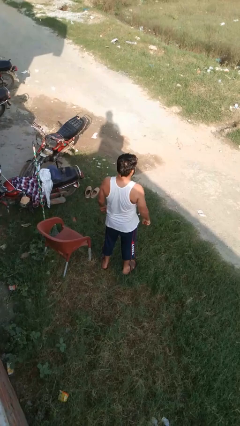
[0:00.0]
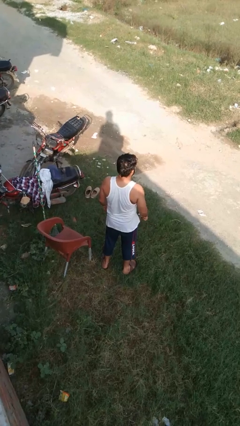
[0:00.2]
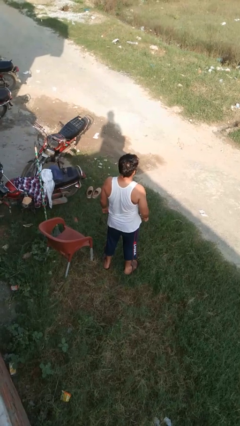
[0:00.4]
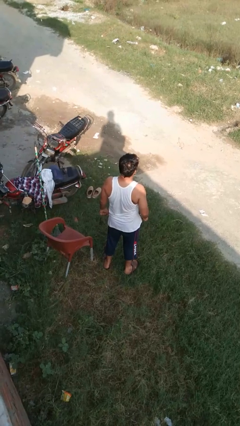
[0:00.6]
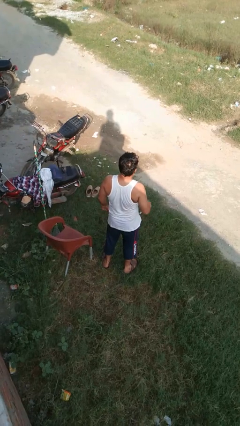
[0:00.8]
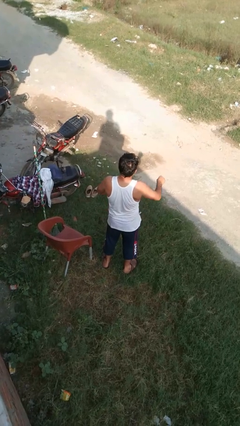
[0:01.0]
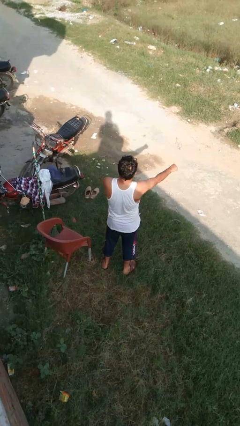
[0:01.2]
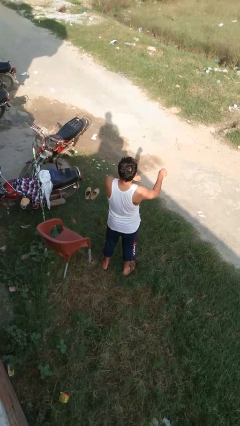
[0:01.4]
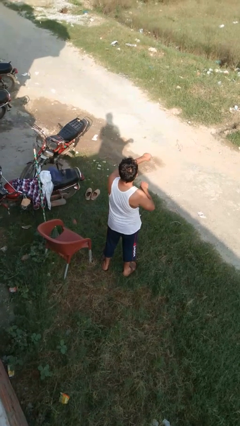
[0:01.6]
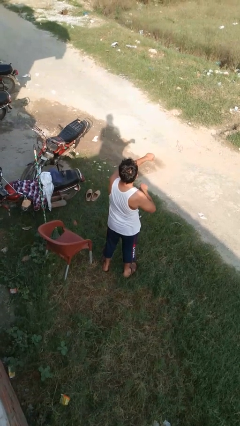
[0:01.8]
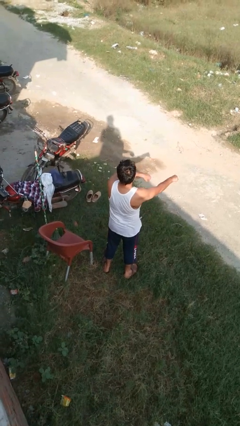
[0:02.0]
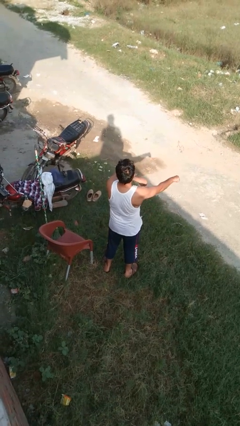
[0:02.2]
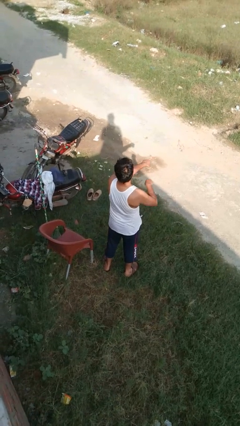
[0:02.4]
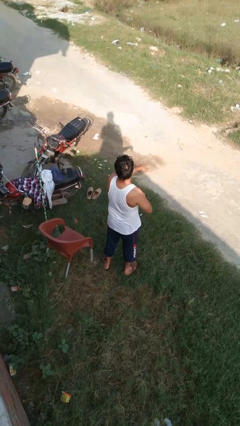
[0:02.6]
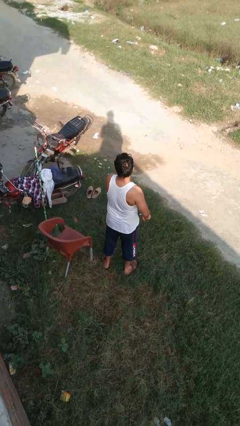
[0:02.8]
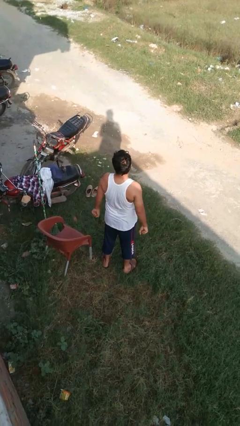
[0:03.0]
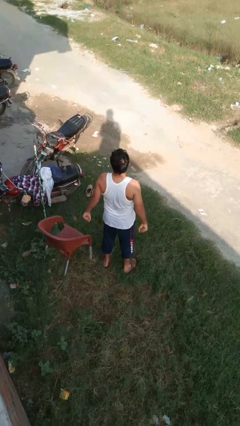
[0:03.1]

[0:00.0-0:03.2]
person punches

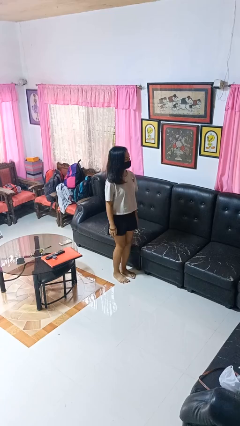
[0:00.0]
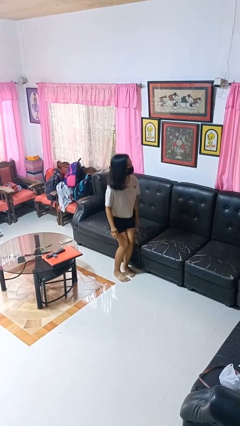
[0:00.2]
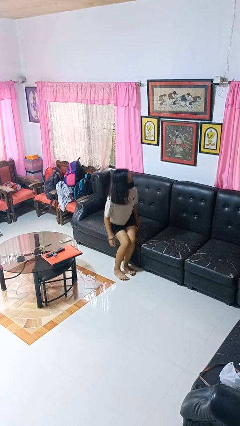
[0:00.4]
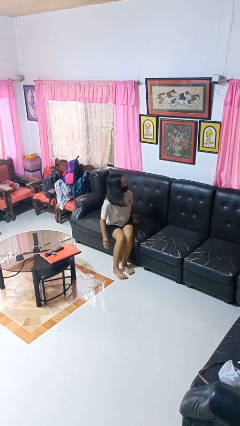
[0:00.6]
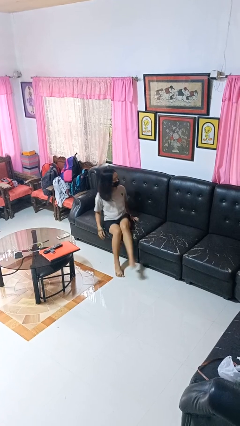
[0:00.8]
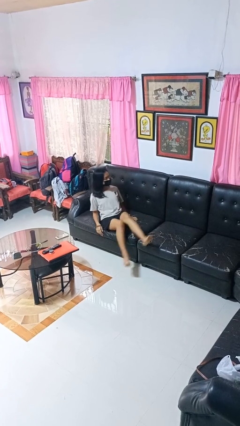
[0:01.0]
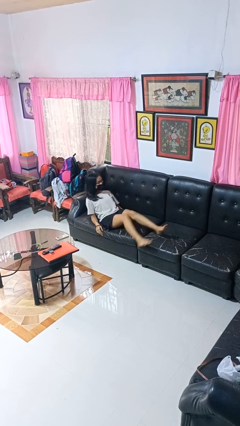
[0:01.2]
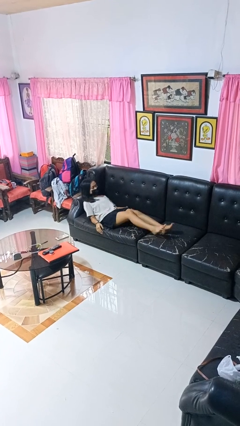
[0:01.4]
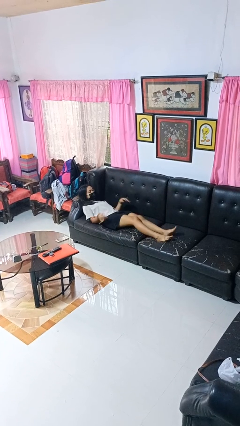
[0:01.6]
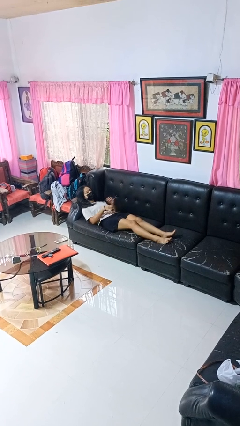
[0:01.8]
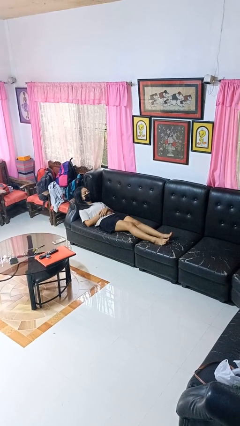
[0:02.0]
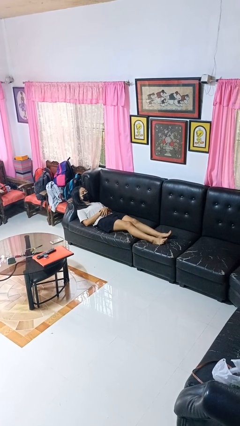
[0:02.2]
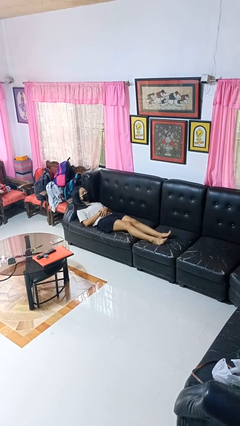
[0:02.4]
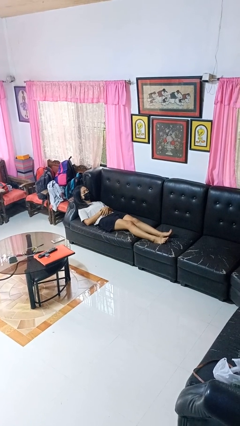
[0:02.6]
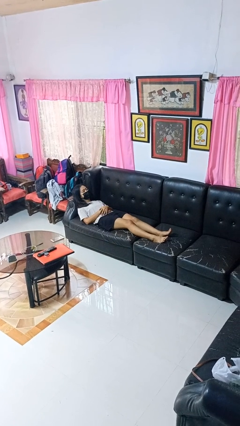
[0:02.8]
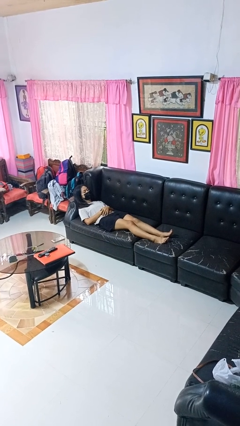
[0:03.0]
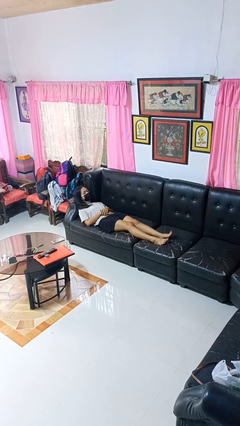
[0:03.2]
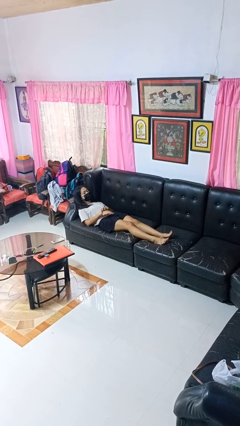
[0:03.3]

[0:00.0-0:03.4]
person lies down on couch

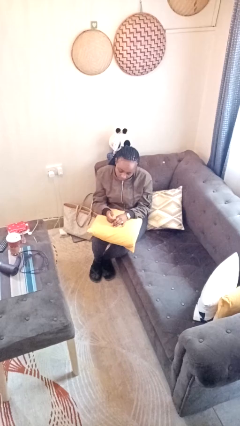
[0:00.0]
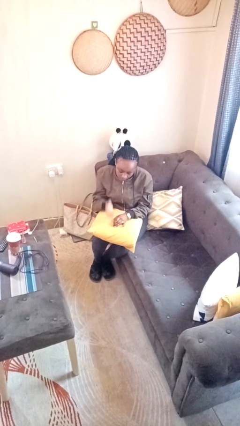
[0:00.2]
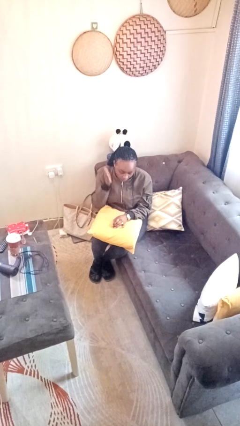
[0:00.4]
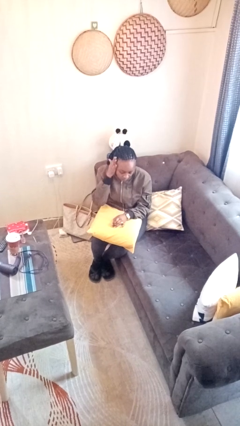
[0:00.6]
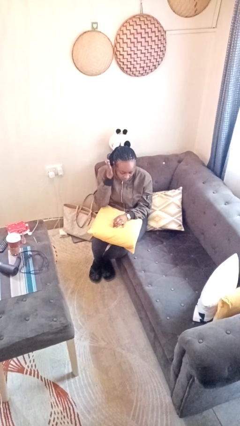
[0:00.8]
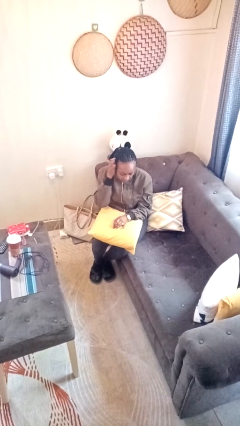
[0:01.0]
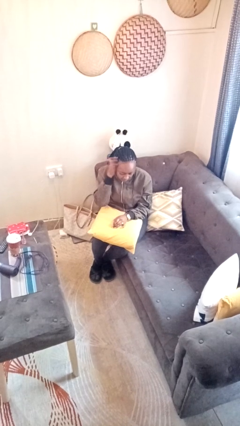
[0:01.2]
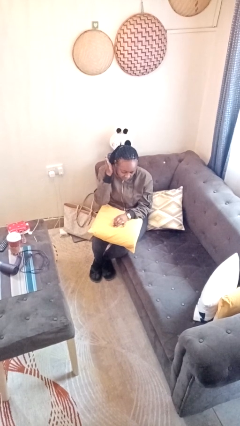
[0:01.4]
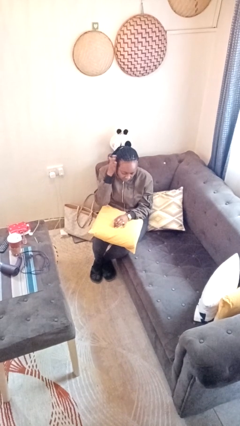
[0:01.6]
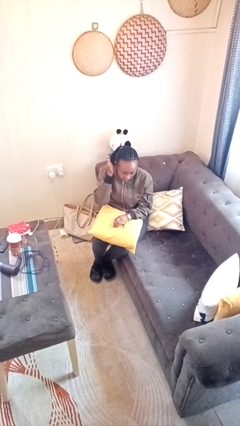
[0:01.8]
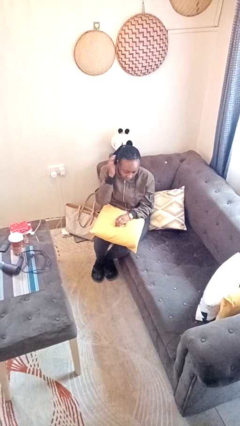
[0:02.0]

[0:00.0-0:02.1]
person pats head

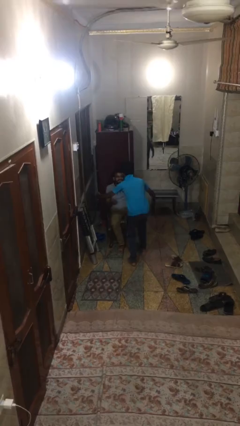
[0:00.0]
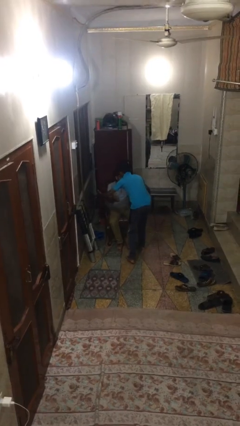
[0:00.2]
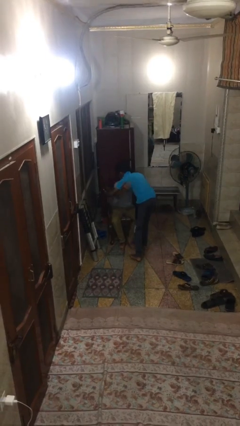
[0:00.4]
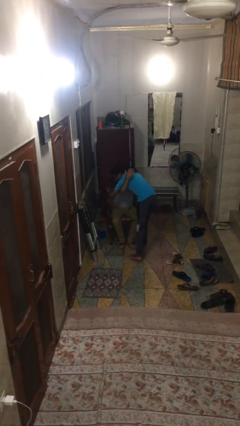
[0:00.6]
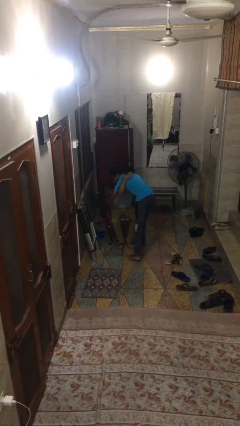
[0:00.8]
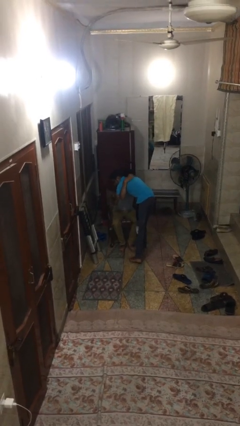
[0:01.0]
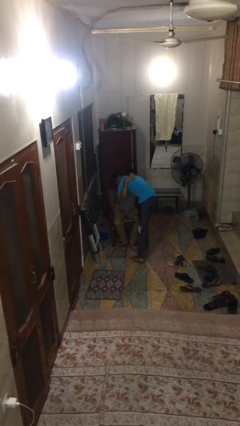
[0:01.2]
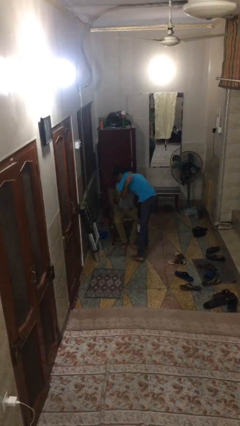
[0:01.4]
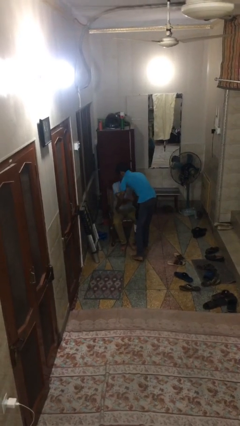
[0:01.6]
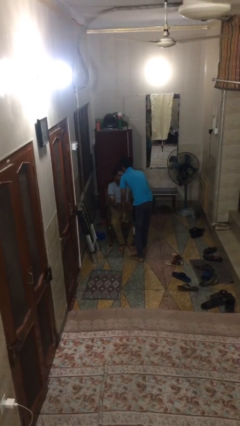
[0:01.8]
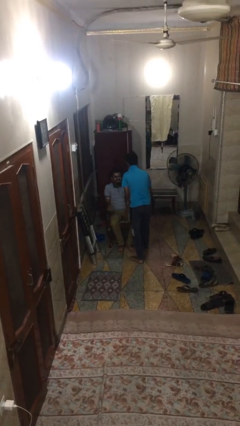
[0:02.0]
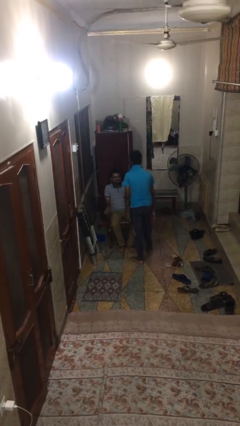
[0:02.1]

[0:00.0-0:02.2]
person embraces person

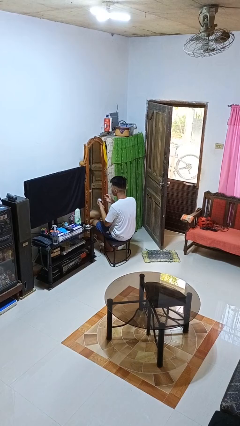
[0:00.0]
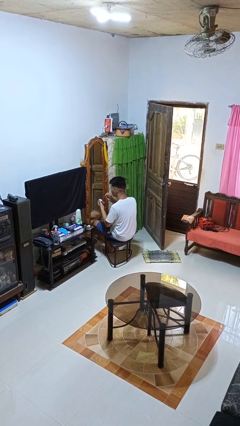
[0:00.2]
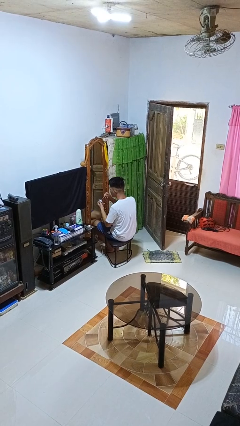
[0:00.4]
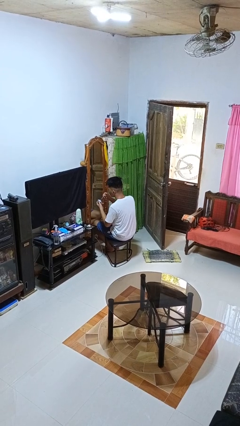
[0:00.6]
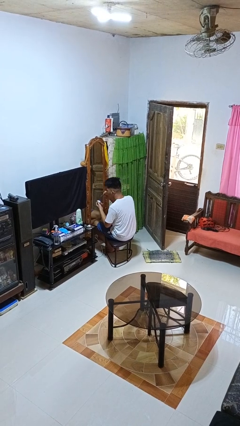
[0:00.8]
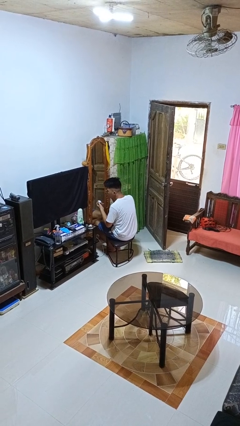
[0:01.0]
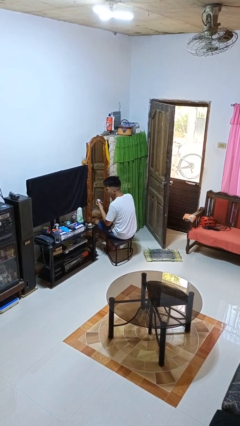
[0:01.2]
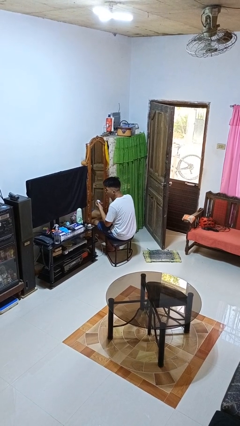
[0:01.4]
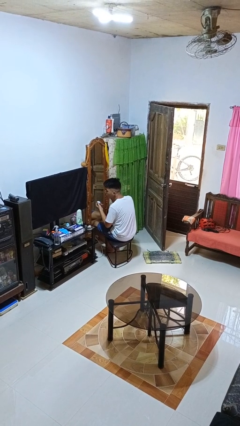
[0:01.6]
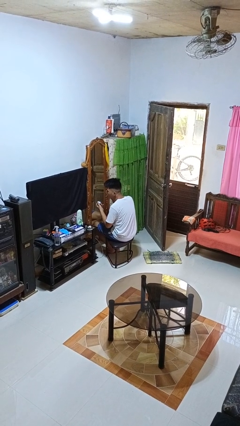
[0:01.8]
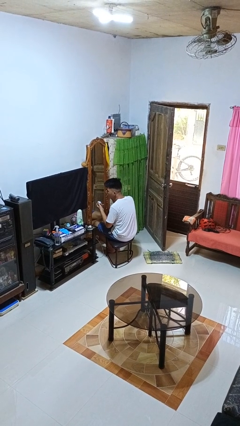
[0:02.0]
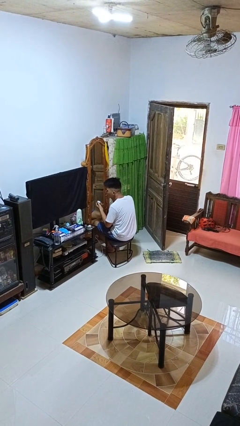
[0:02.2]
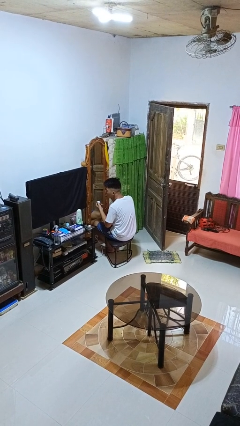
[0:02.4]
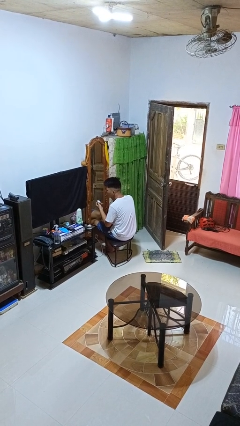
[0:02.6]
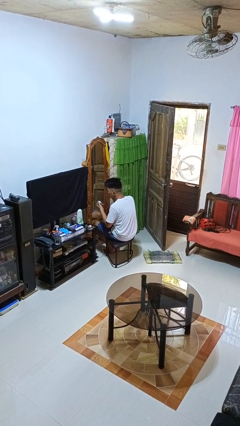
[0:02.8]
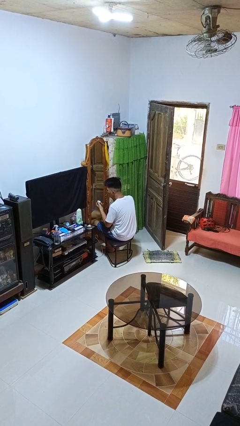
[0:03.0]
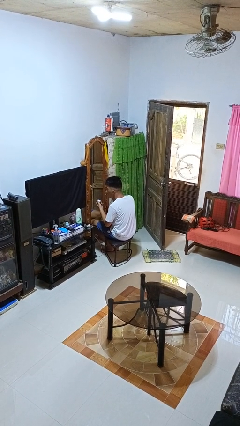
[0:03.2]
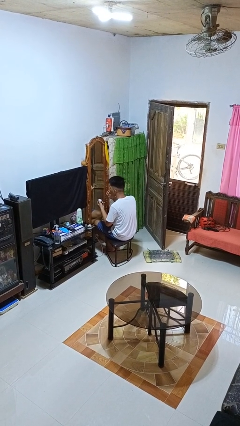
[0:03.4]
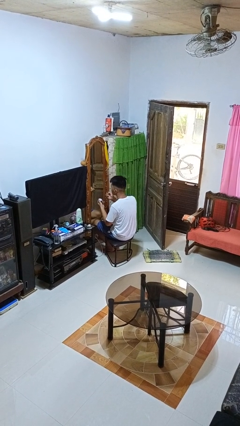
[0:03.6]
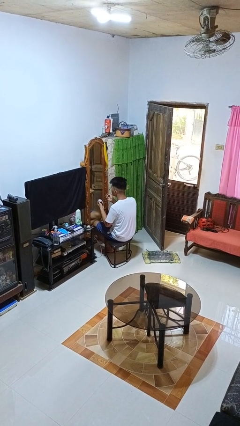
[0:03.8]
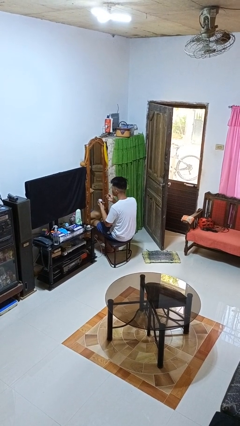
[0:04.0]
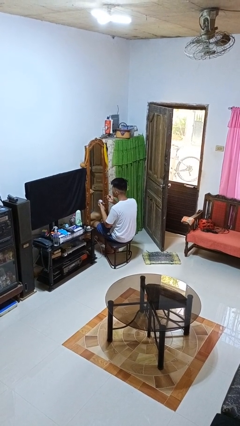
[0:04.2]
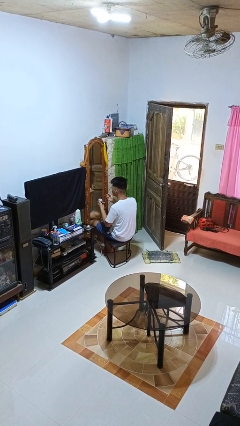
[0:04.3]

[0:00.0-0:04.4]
person applies eye makeup

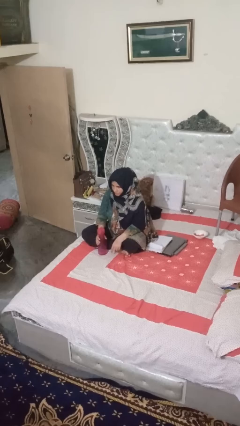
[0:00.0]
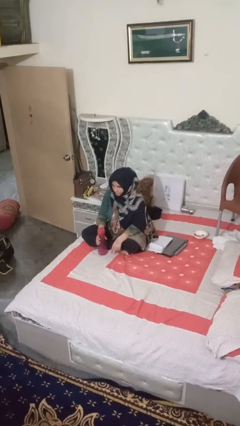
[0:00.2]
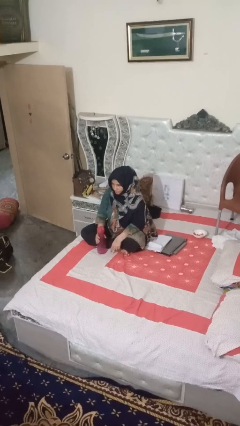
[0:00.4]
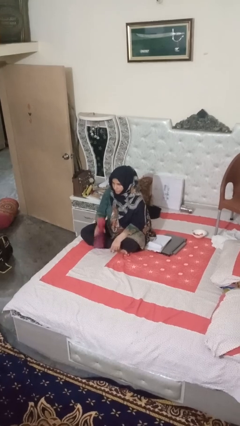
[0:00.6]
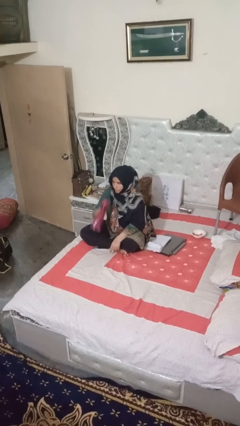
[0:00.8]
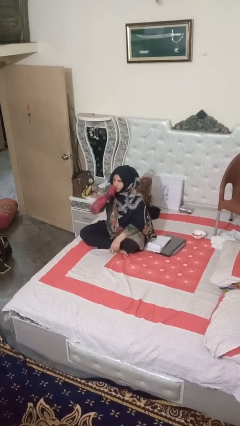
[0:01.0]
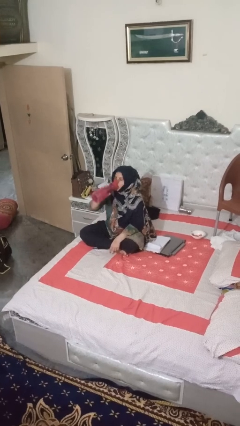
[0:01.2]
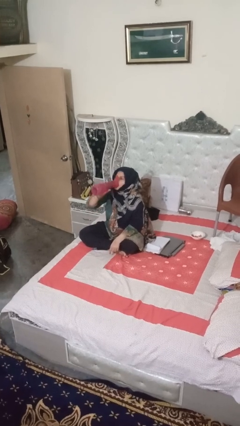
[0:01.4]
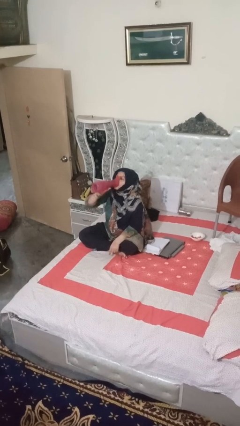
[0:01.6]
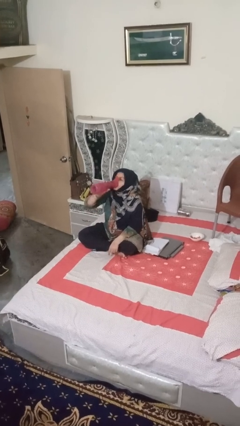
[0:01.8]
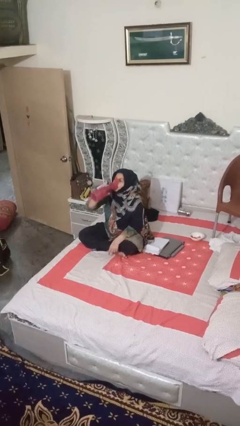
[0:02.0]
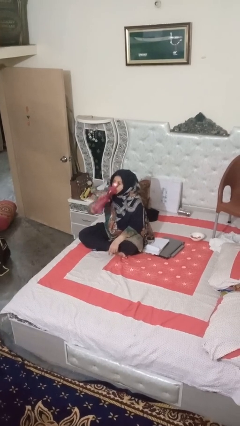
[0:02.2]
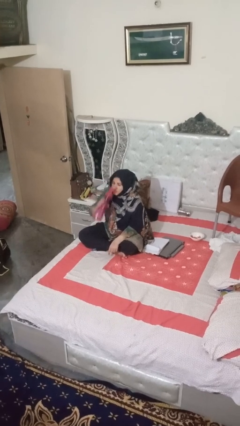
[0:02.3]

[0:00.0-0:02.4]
person drinks from bottle
